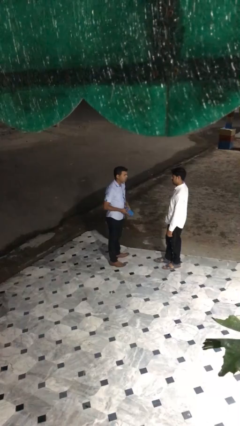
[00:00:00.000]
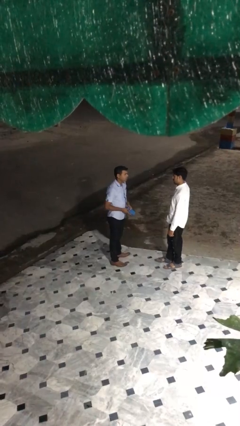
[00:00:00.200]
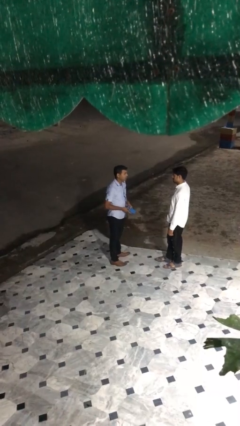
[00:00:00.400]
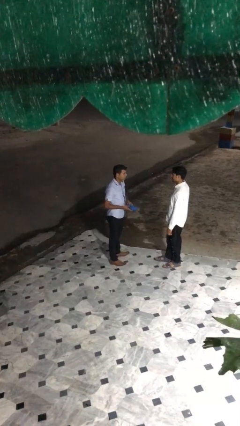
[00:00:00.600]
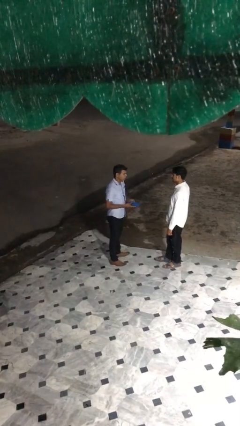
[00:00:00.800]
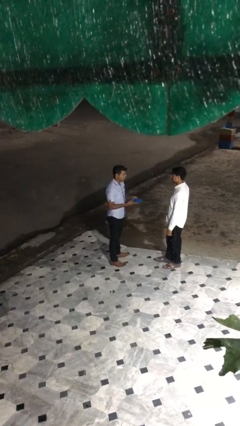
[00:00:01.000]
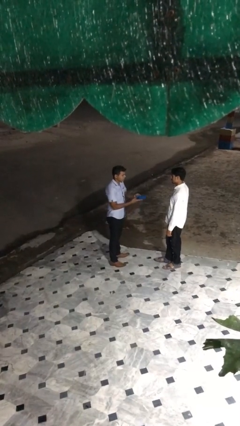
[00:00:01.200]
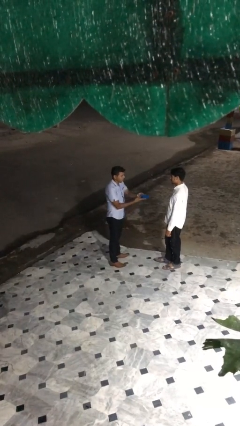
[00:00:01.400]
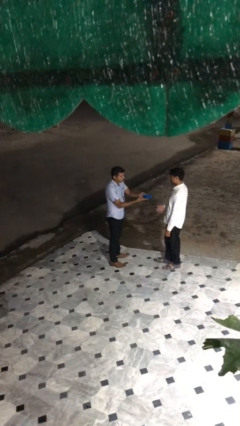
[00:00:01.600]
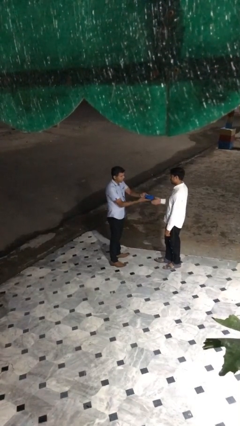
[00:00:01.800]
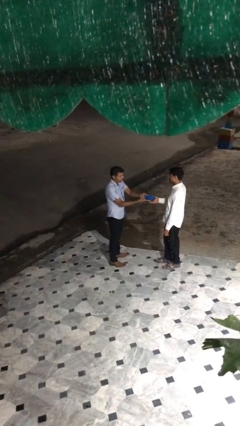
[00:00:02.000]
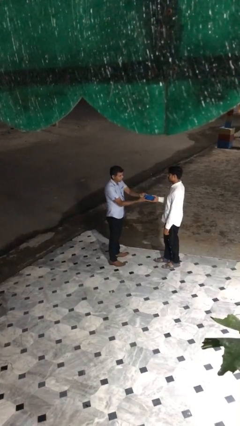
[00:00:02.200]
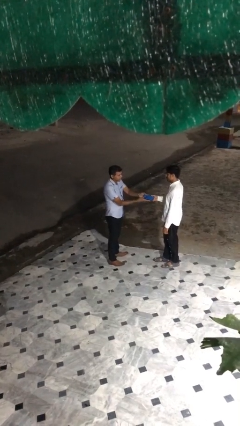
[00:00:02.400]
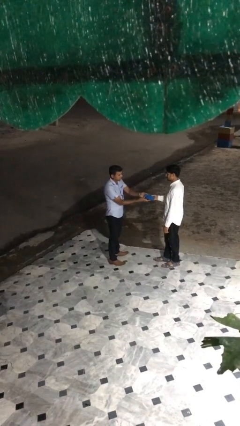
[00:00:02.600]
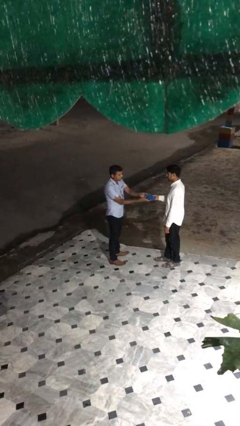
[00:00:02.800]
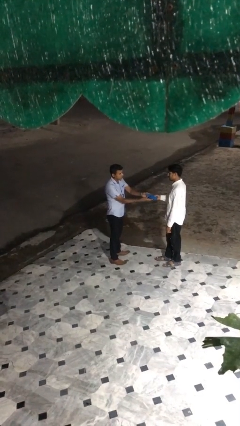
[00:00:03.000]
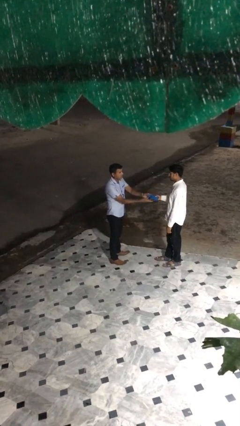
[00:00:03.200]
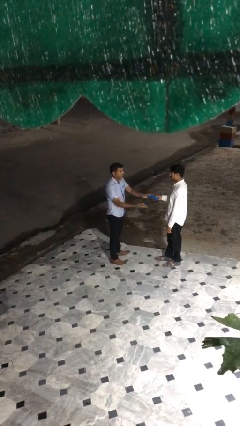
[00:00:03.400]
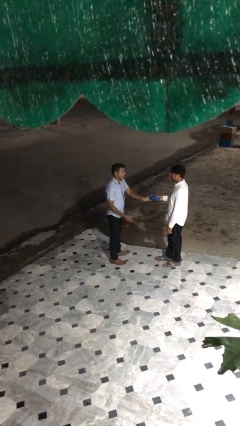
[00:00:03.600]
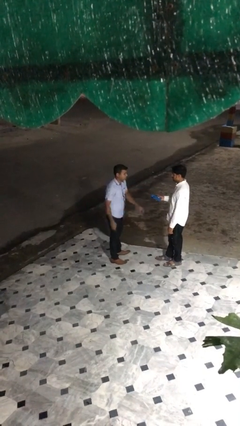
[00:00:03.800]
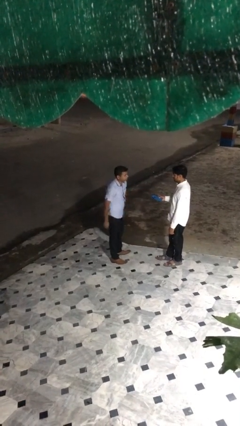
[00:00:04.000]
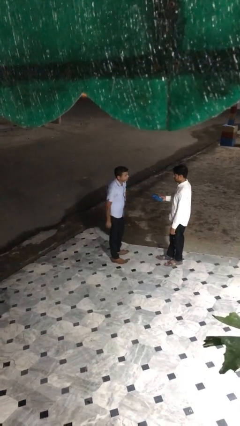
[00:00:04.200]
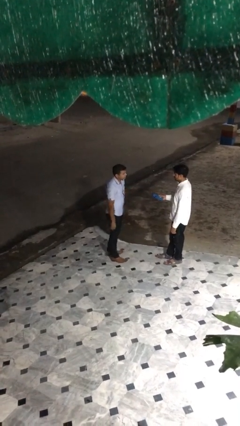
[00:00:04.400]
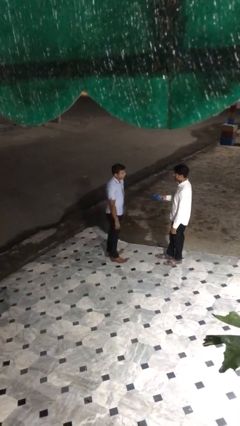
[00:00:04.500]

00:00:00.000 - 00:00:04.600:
person transfers object to person

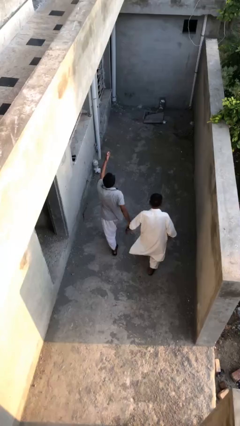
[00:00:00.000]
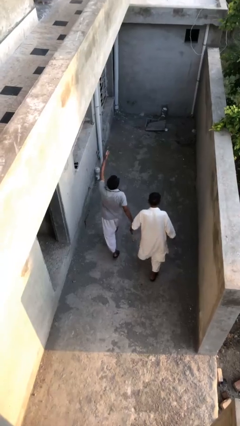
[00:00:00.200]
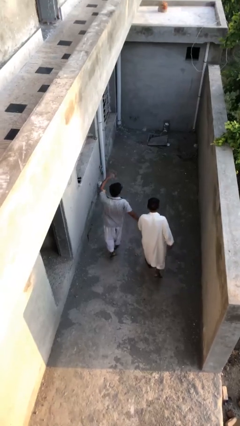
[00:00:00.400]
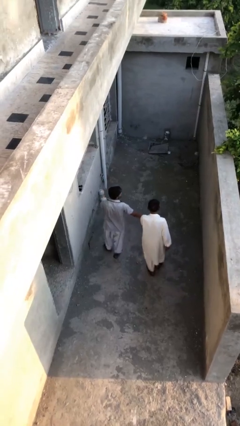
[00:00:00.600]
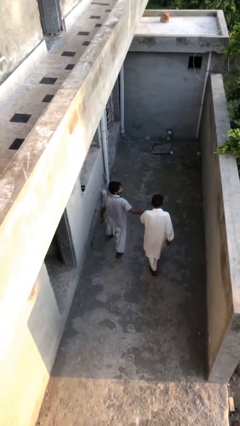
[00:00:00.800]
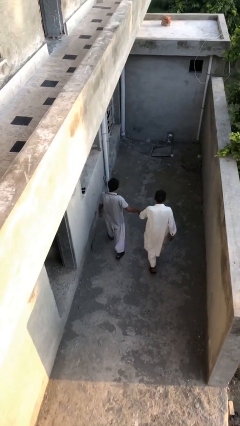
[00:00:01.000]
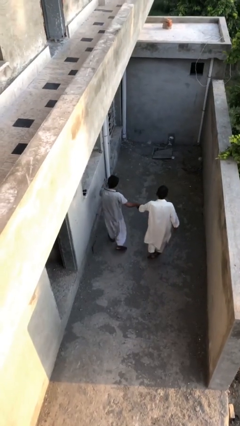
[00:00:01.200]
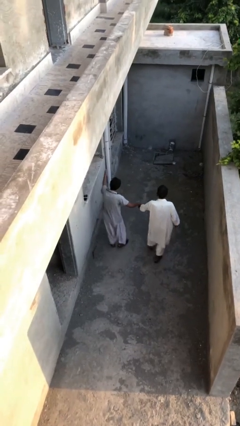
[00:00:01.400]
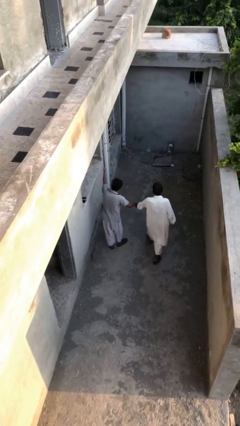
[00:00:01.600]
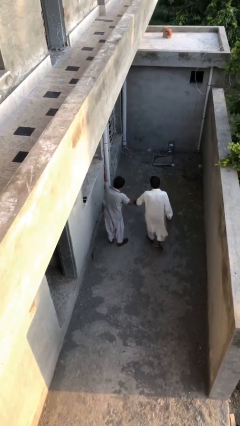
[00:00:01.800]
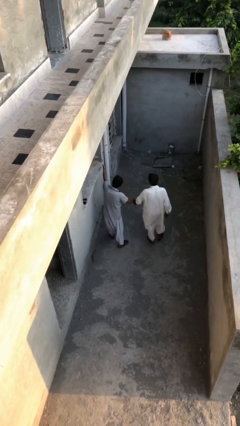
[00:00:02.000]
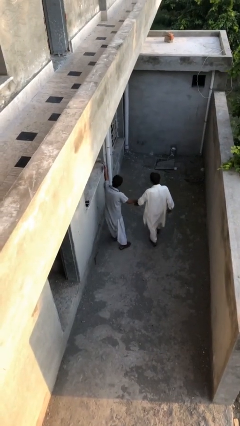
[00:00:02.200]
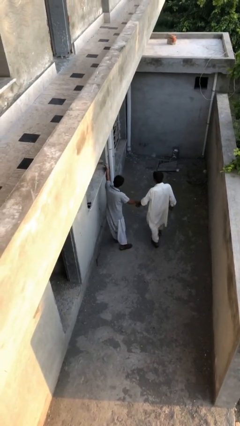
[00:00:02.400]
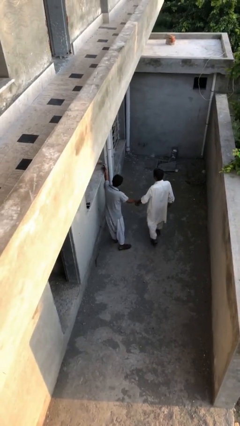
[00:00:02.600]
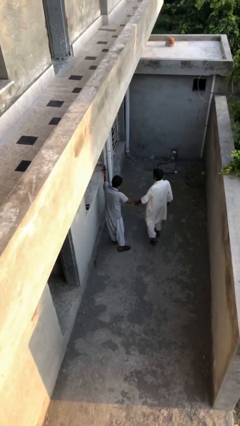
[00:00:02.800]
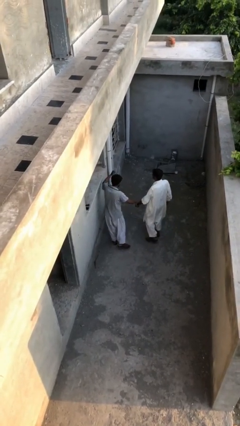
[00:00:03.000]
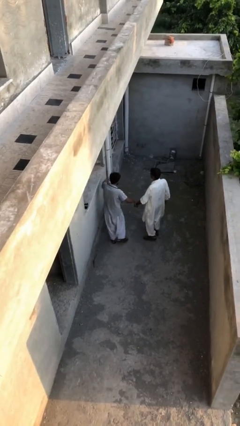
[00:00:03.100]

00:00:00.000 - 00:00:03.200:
person holds hand

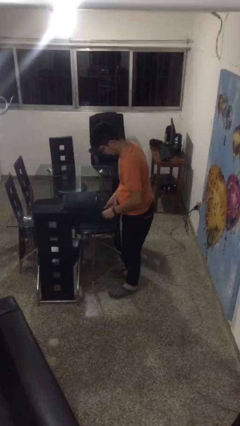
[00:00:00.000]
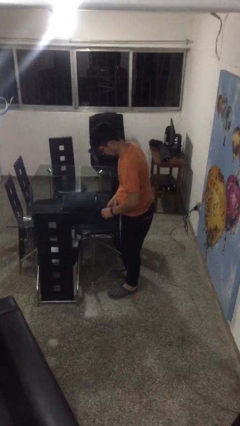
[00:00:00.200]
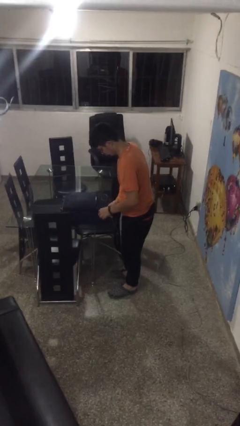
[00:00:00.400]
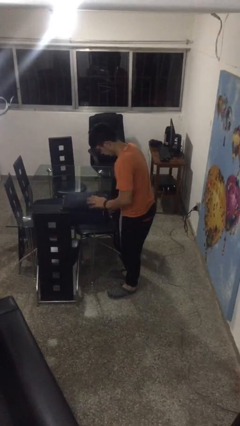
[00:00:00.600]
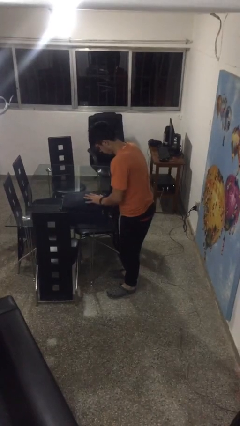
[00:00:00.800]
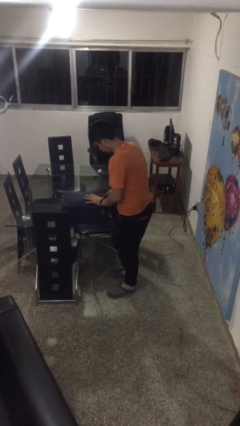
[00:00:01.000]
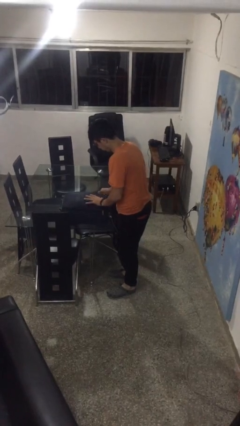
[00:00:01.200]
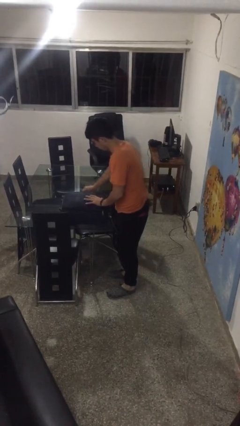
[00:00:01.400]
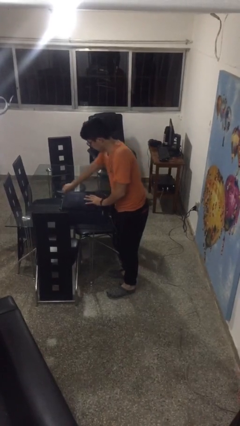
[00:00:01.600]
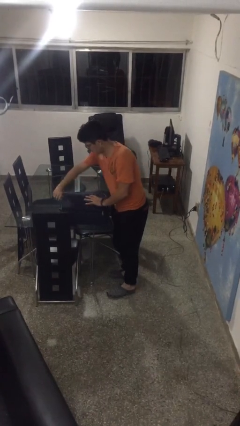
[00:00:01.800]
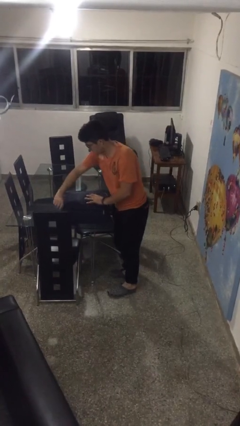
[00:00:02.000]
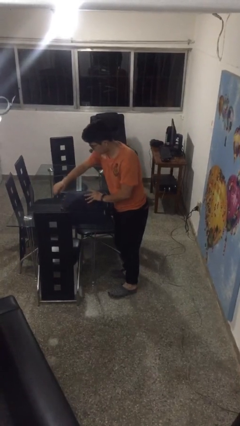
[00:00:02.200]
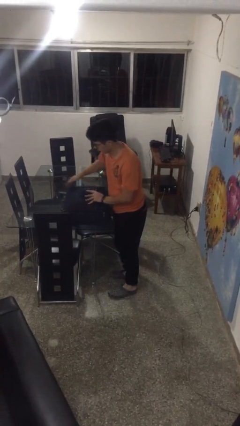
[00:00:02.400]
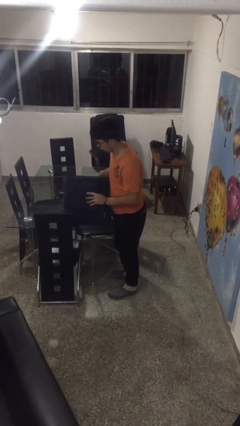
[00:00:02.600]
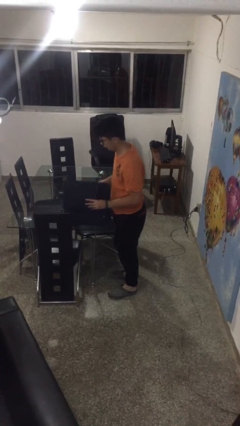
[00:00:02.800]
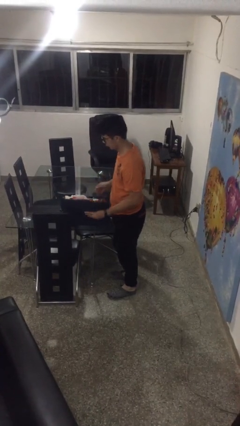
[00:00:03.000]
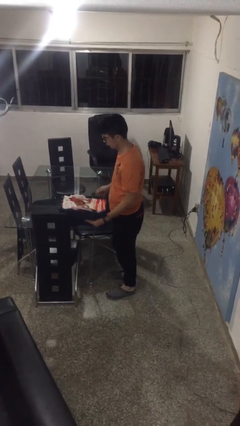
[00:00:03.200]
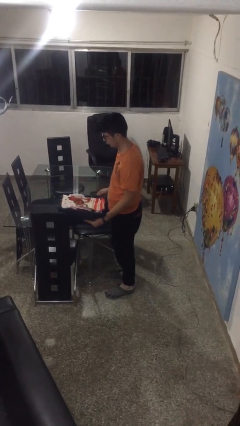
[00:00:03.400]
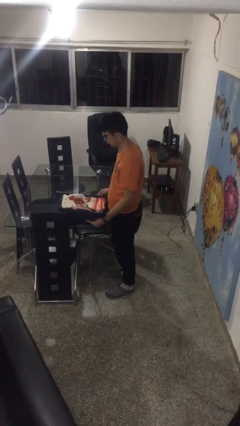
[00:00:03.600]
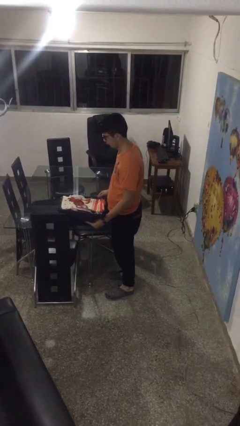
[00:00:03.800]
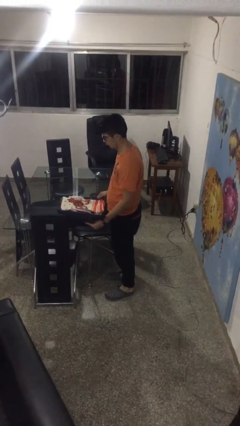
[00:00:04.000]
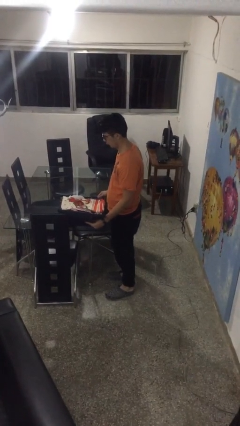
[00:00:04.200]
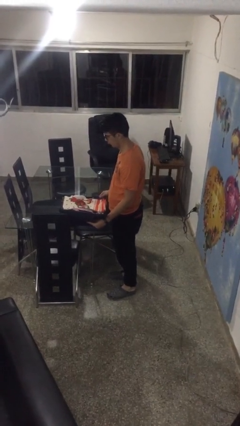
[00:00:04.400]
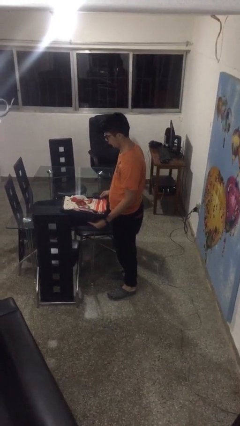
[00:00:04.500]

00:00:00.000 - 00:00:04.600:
person opens suitcase

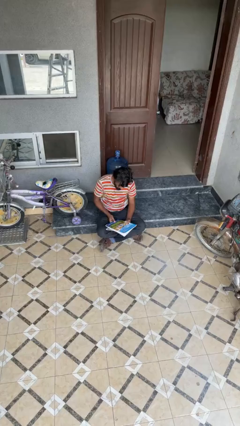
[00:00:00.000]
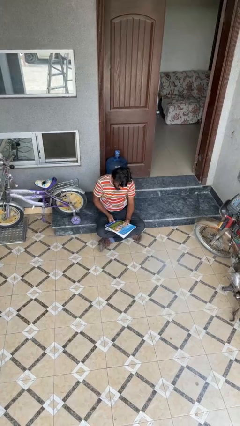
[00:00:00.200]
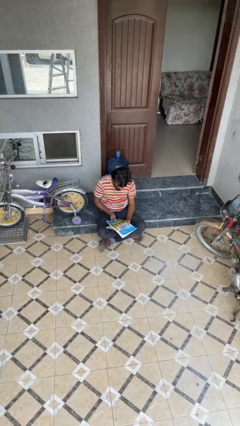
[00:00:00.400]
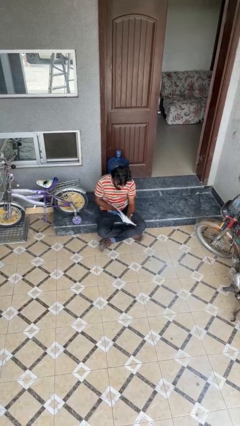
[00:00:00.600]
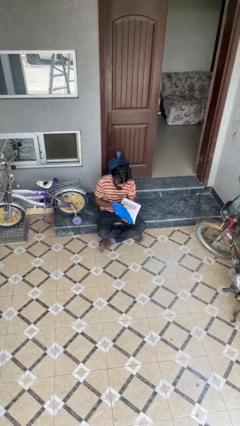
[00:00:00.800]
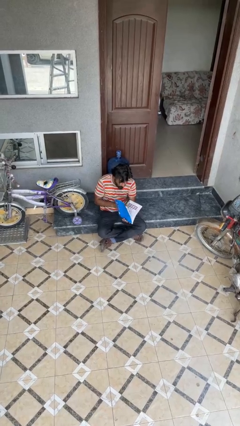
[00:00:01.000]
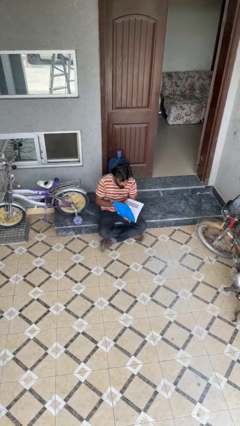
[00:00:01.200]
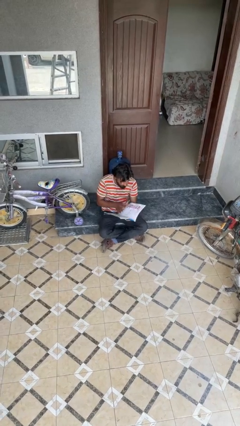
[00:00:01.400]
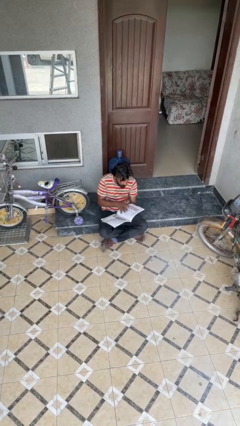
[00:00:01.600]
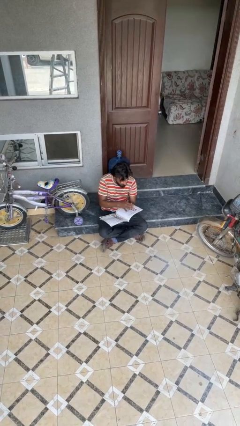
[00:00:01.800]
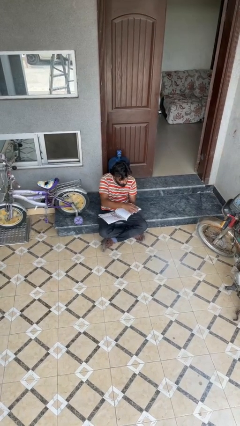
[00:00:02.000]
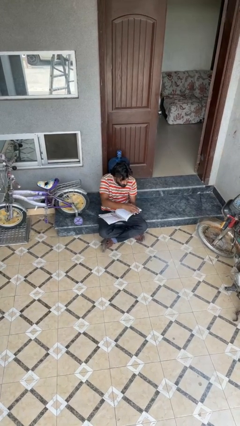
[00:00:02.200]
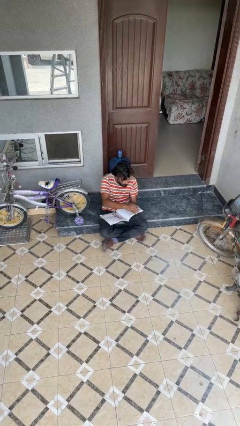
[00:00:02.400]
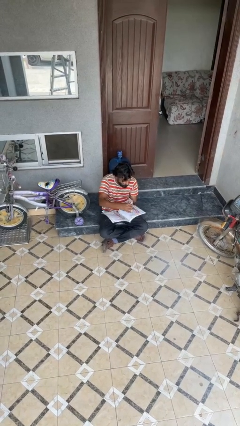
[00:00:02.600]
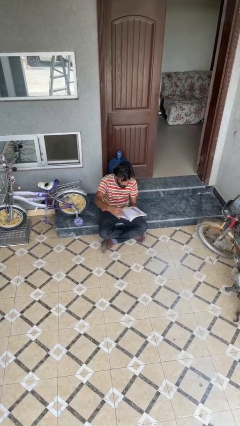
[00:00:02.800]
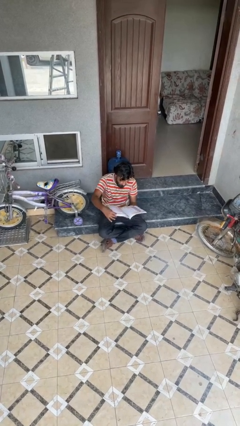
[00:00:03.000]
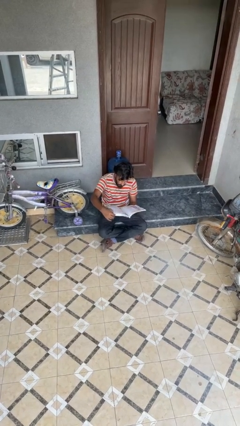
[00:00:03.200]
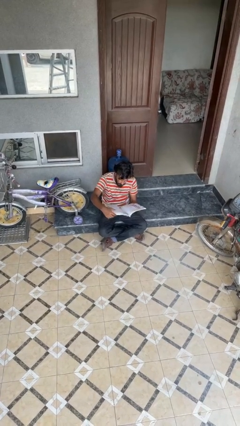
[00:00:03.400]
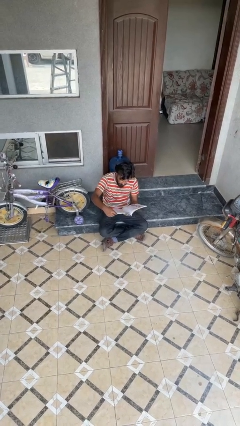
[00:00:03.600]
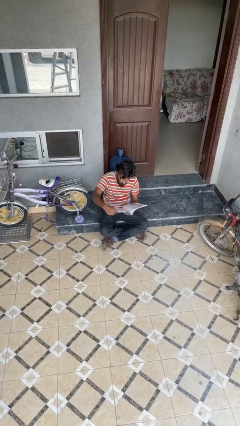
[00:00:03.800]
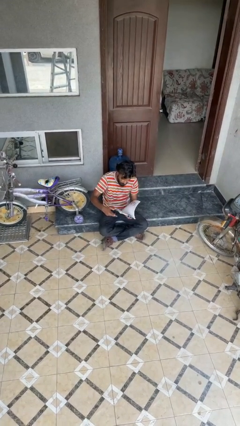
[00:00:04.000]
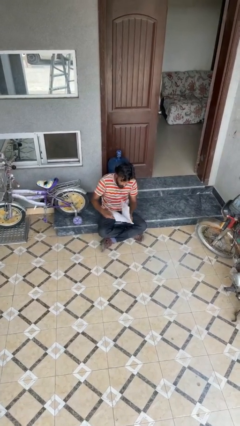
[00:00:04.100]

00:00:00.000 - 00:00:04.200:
person reads book

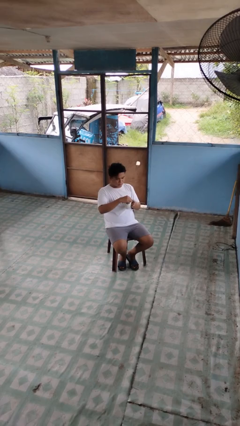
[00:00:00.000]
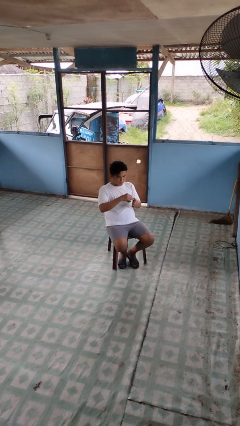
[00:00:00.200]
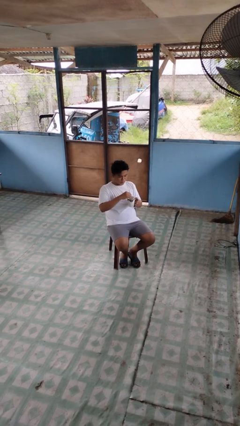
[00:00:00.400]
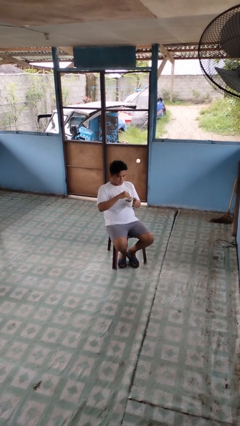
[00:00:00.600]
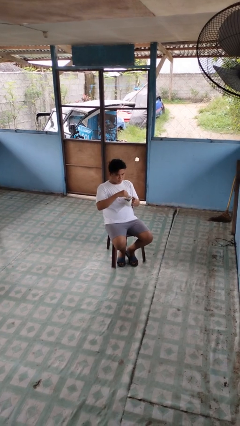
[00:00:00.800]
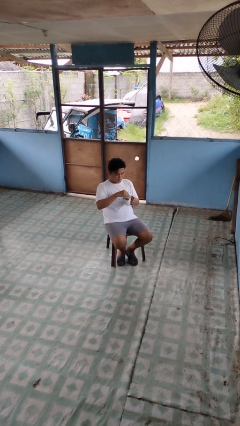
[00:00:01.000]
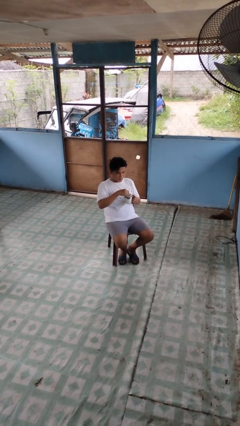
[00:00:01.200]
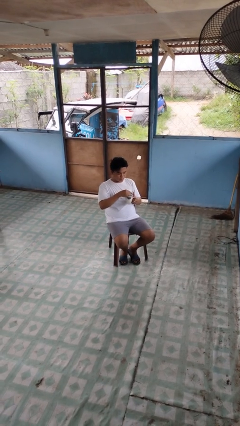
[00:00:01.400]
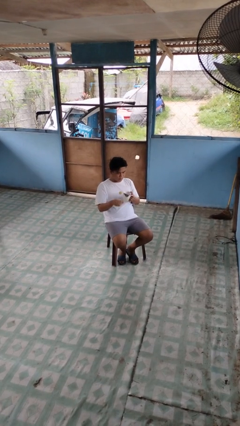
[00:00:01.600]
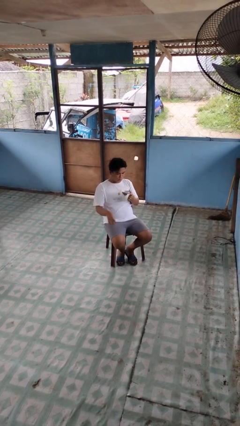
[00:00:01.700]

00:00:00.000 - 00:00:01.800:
person stirs mug
